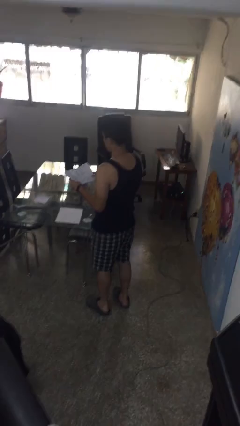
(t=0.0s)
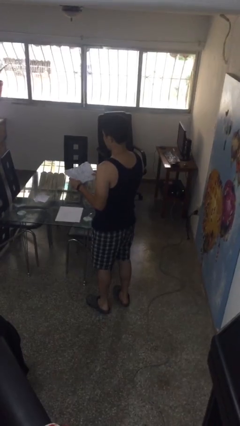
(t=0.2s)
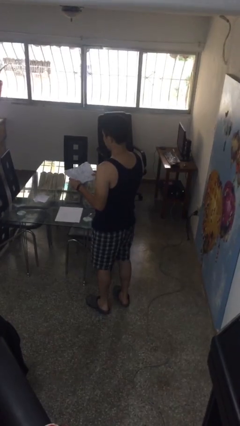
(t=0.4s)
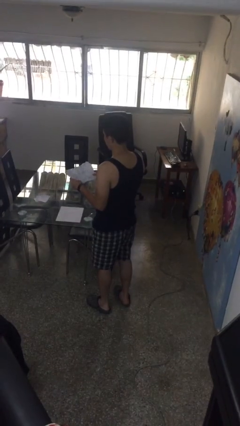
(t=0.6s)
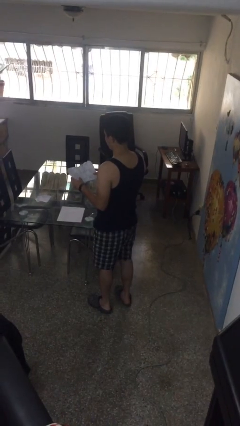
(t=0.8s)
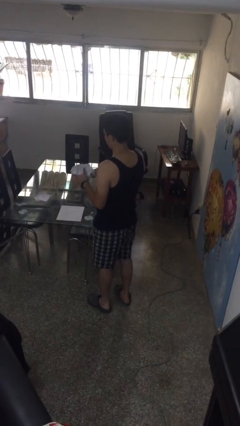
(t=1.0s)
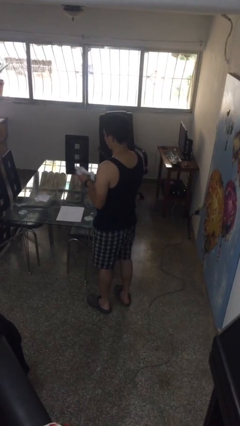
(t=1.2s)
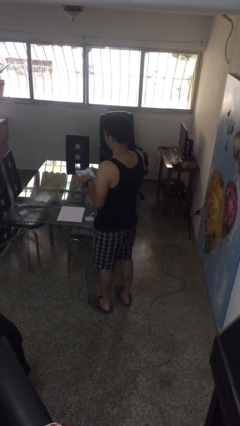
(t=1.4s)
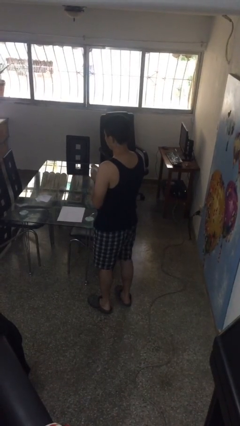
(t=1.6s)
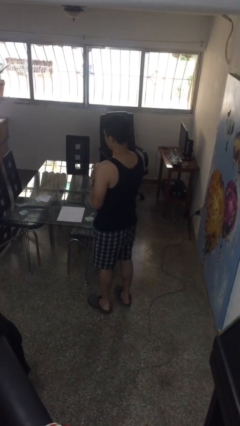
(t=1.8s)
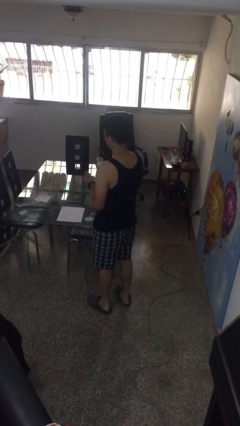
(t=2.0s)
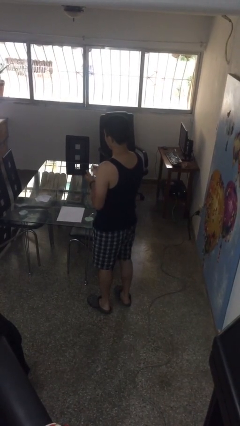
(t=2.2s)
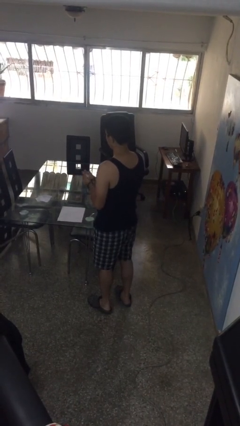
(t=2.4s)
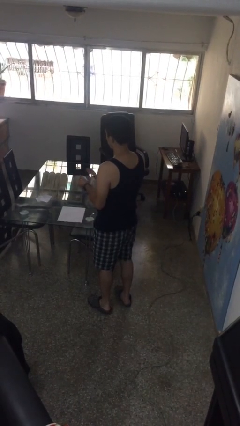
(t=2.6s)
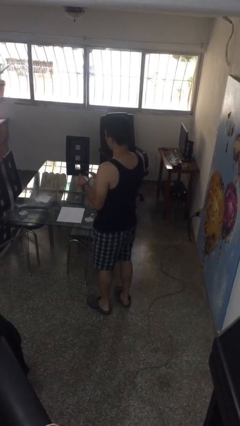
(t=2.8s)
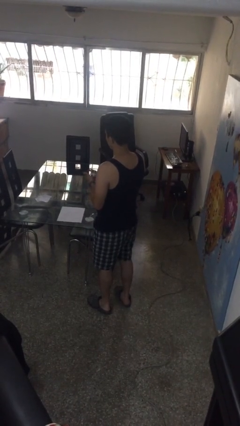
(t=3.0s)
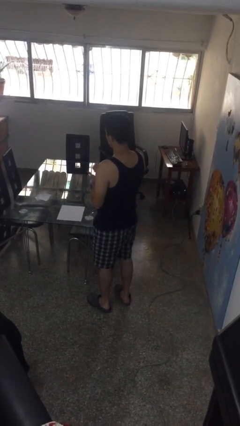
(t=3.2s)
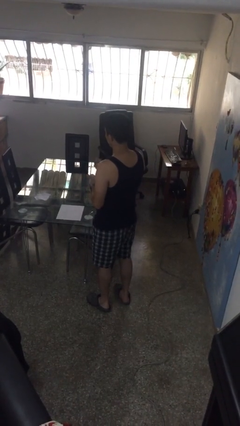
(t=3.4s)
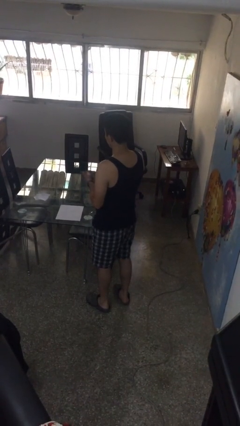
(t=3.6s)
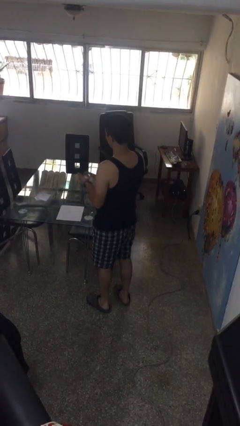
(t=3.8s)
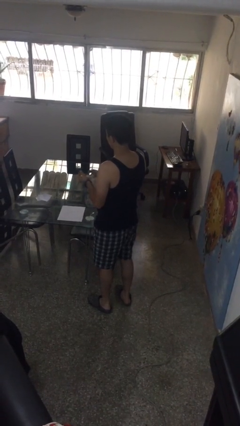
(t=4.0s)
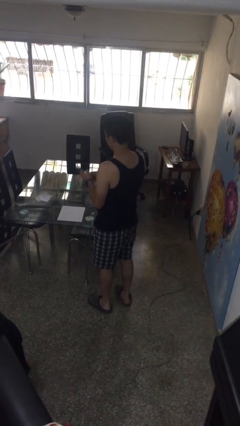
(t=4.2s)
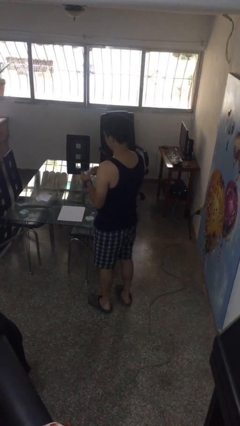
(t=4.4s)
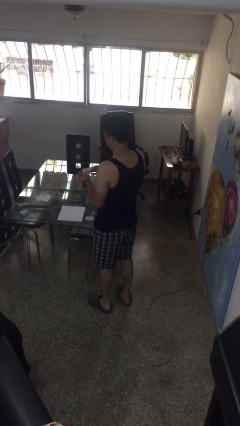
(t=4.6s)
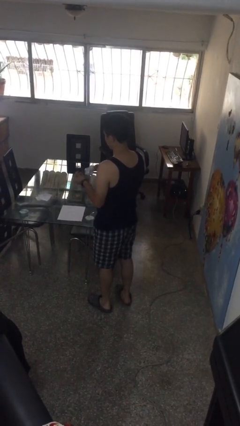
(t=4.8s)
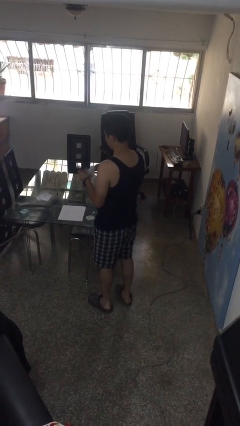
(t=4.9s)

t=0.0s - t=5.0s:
person crumples paper

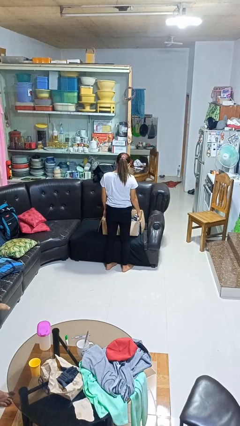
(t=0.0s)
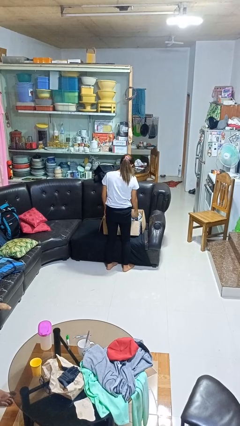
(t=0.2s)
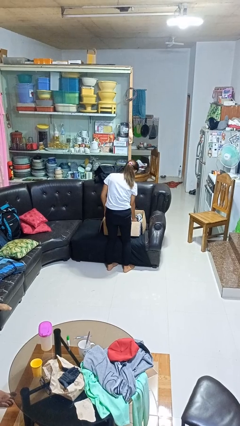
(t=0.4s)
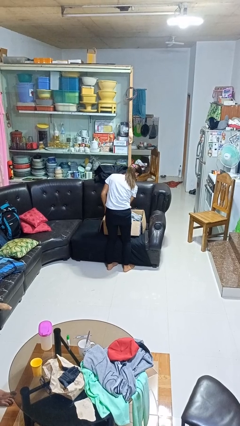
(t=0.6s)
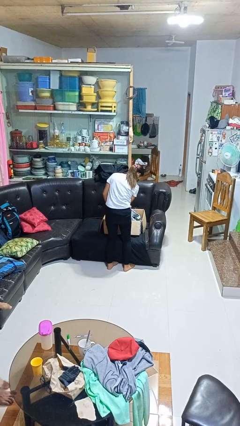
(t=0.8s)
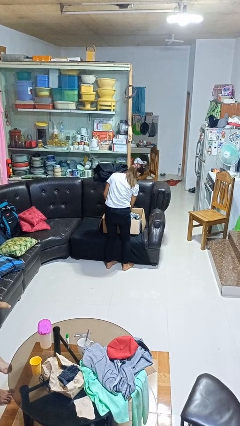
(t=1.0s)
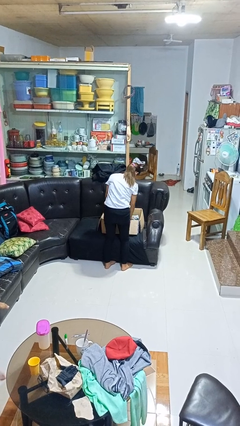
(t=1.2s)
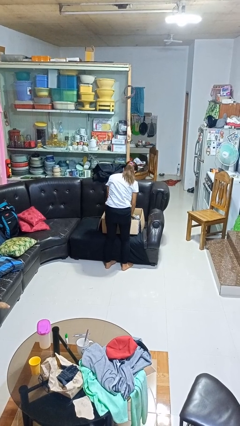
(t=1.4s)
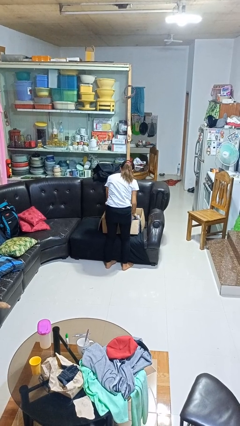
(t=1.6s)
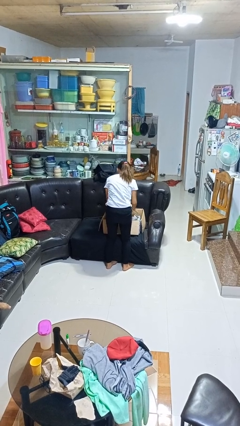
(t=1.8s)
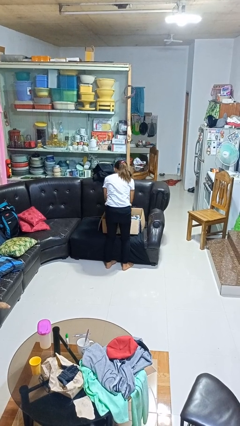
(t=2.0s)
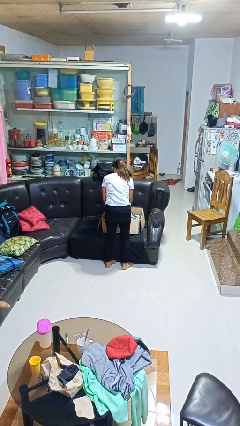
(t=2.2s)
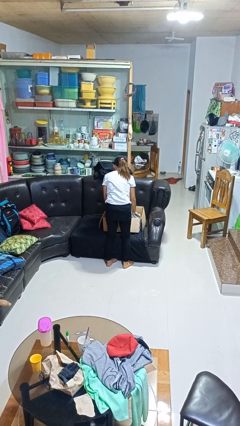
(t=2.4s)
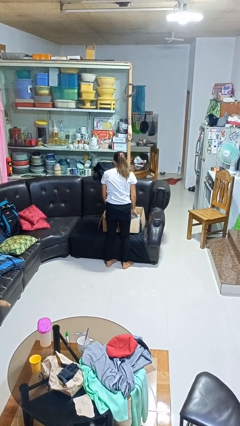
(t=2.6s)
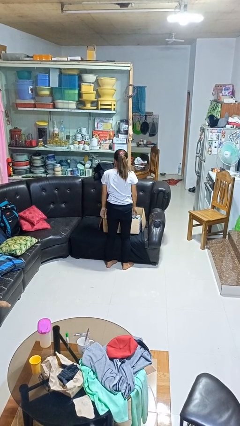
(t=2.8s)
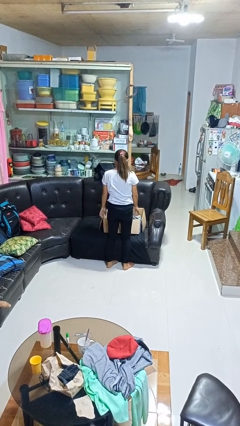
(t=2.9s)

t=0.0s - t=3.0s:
person searches in box

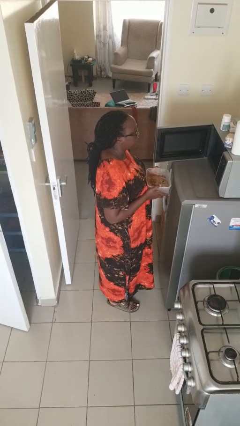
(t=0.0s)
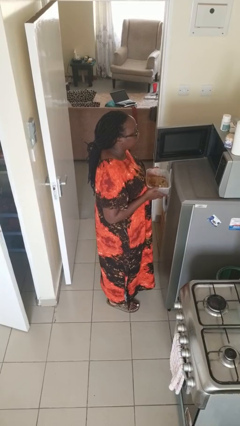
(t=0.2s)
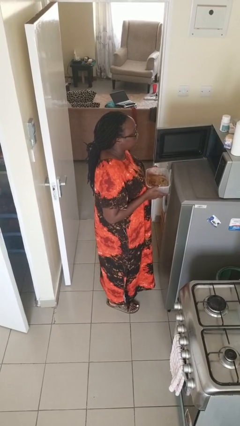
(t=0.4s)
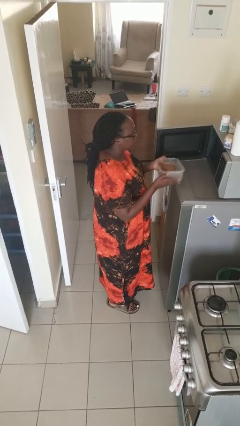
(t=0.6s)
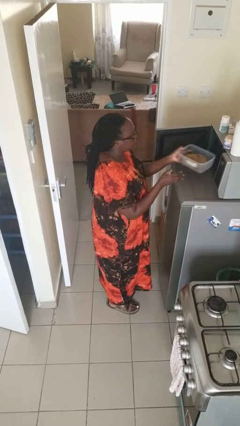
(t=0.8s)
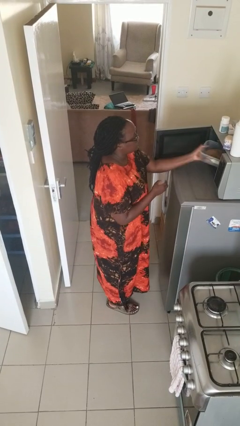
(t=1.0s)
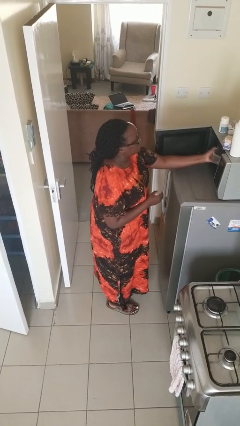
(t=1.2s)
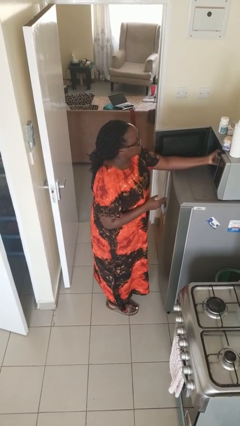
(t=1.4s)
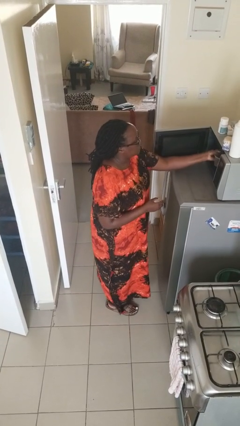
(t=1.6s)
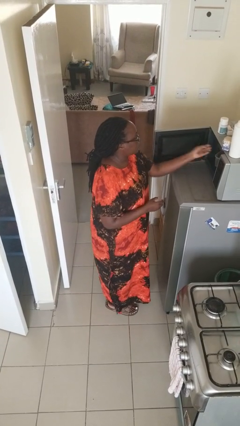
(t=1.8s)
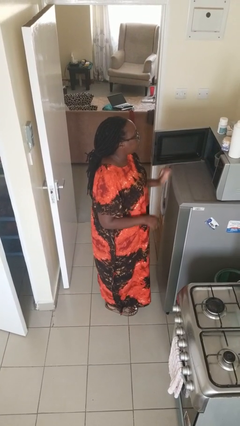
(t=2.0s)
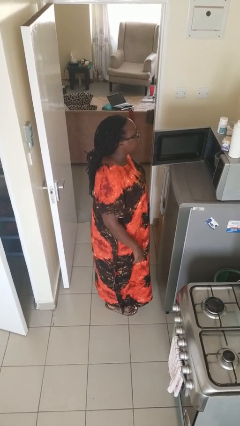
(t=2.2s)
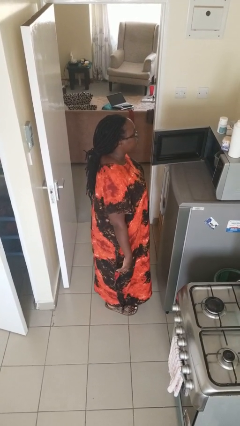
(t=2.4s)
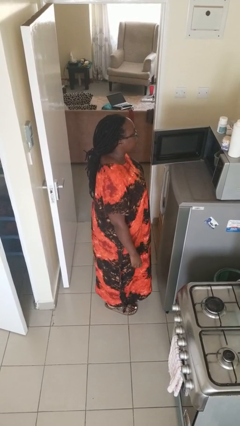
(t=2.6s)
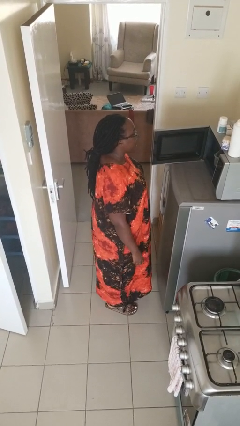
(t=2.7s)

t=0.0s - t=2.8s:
person puts object into microwave

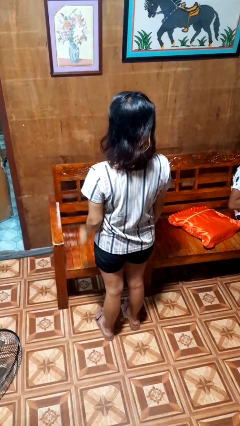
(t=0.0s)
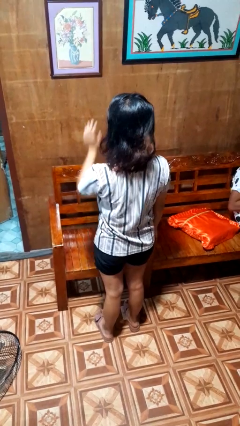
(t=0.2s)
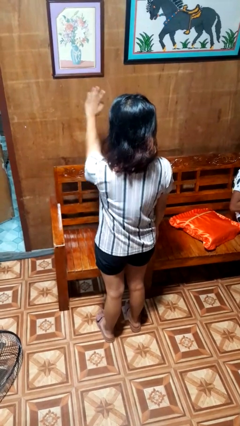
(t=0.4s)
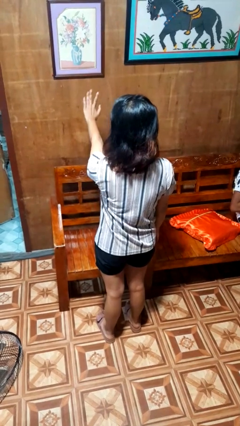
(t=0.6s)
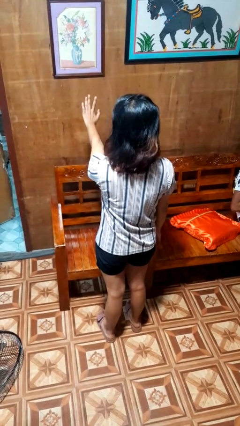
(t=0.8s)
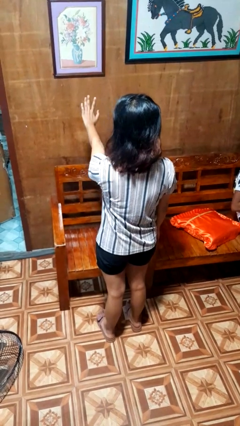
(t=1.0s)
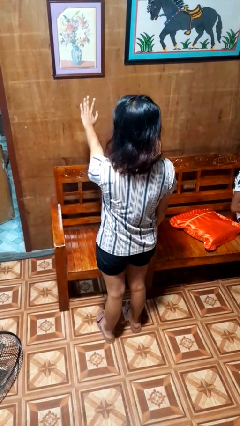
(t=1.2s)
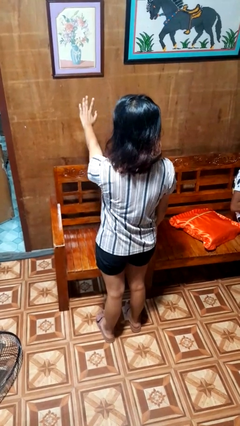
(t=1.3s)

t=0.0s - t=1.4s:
person gestures stop

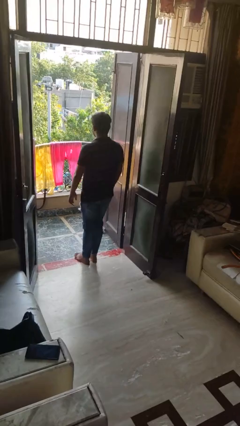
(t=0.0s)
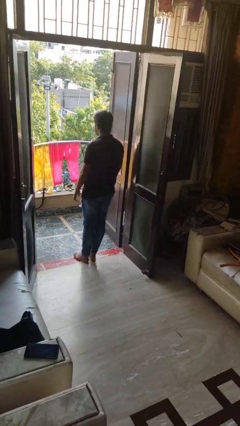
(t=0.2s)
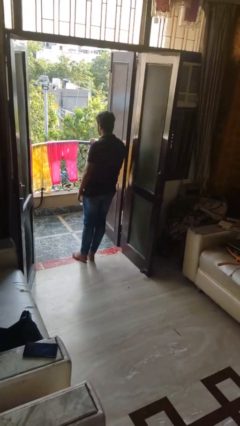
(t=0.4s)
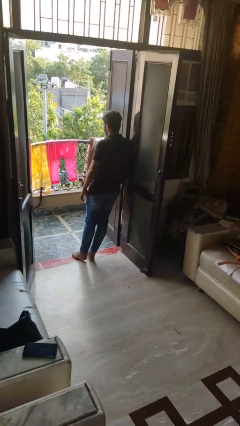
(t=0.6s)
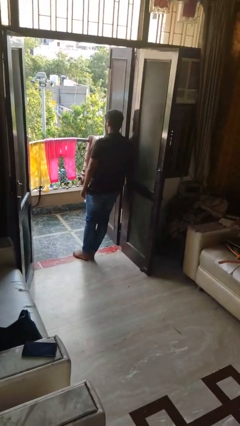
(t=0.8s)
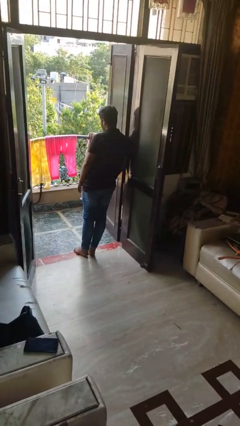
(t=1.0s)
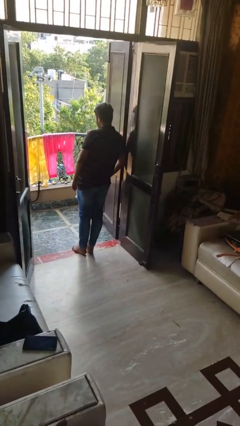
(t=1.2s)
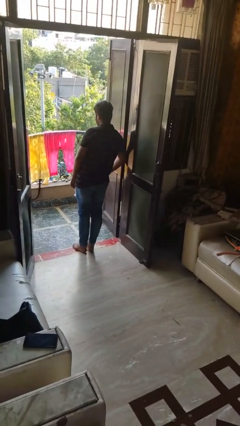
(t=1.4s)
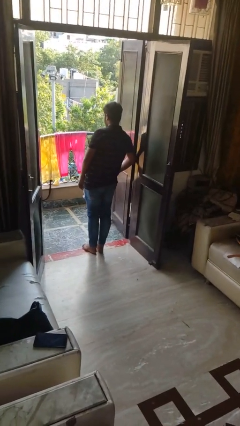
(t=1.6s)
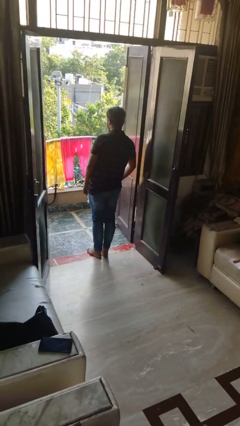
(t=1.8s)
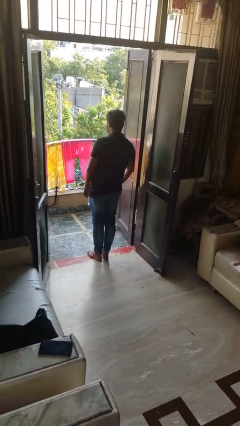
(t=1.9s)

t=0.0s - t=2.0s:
person bumps into wall

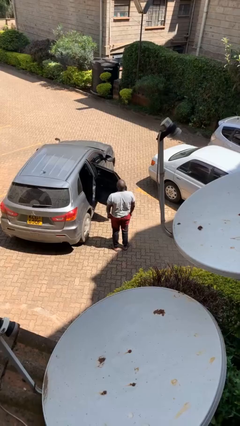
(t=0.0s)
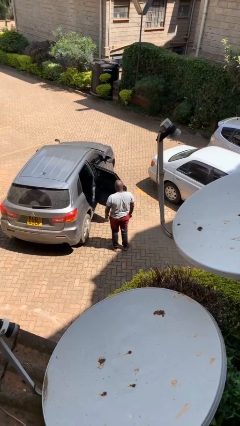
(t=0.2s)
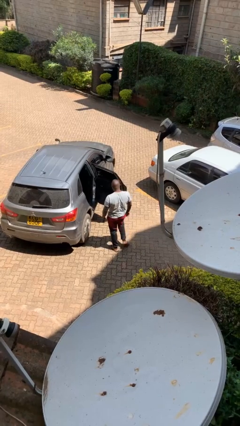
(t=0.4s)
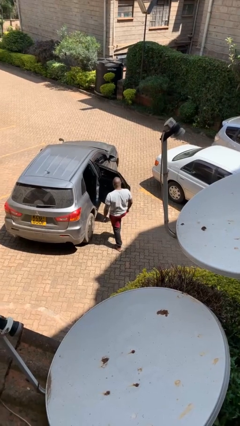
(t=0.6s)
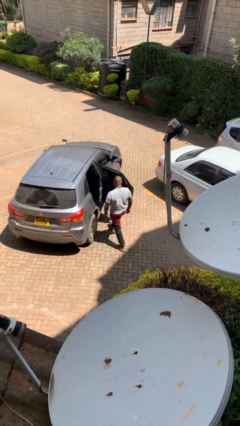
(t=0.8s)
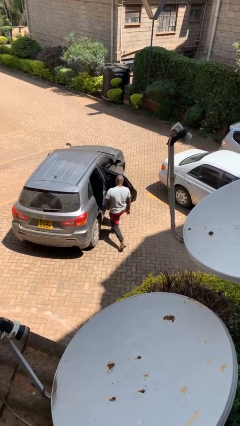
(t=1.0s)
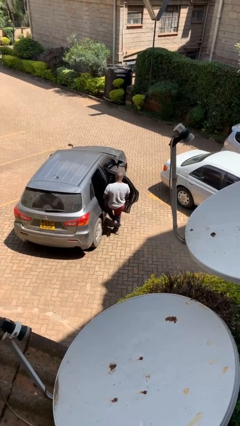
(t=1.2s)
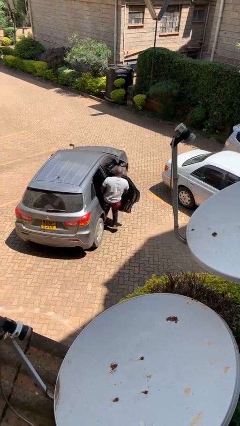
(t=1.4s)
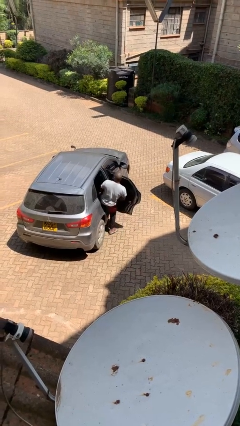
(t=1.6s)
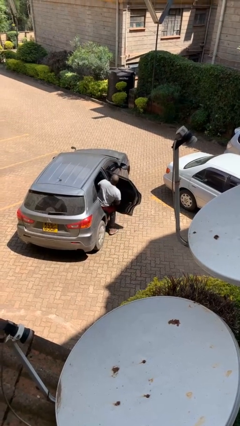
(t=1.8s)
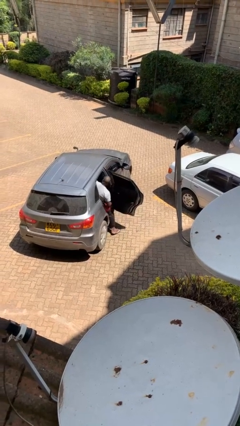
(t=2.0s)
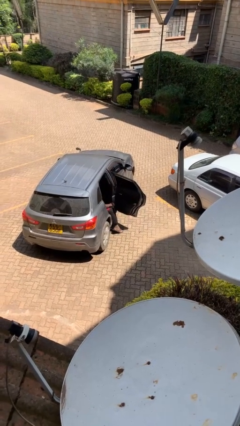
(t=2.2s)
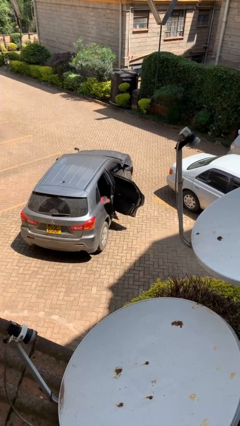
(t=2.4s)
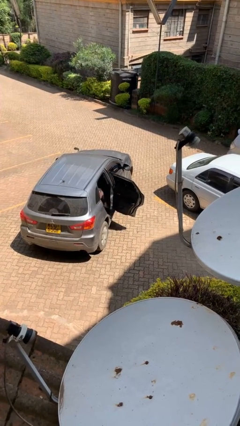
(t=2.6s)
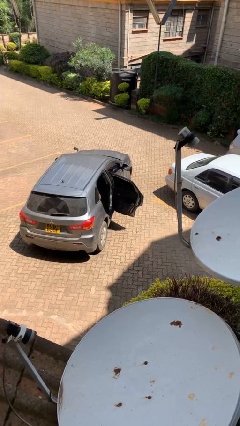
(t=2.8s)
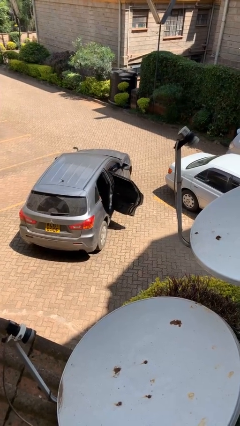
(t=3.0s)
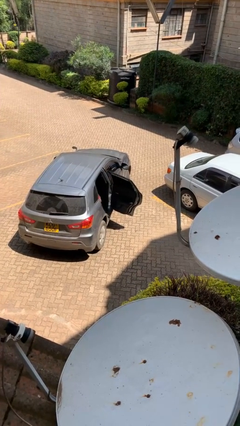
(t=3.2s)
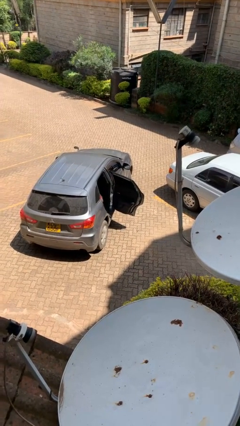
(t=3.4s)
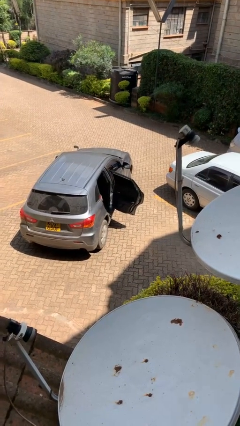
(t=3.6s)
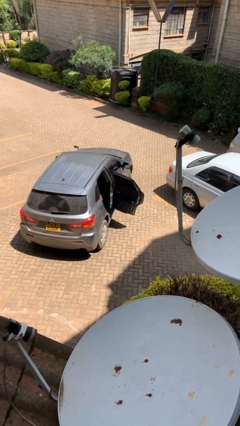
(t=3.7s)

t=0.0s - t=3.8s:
person enters car
